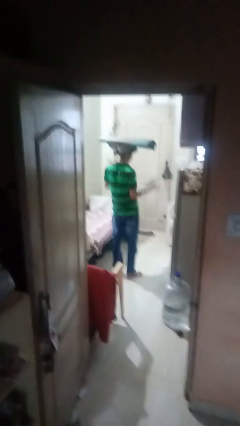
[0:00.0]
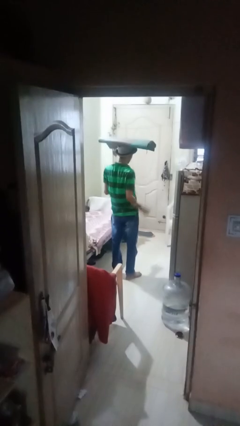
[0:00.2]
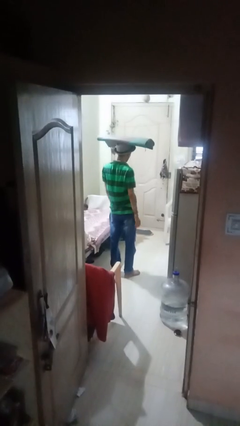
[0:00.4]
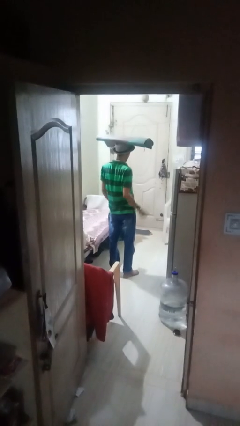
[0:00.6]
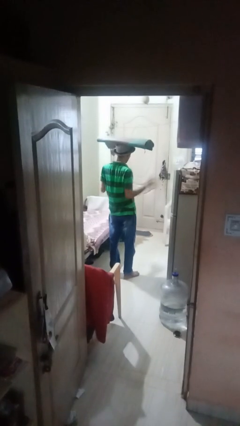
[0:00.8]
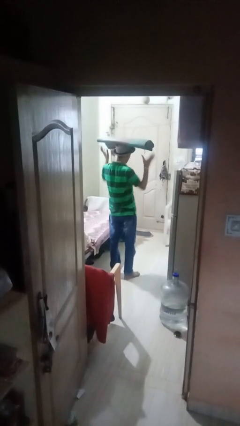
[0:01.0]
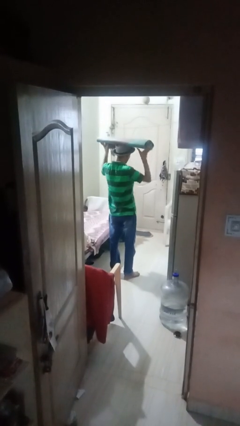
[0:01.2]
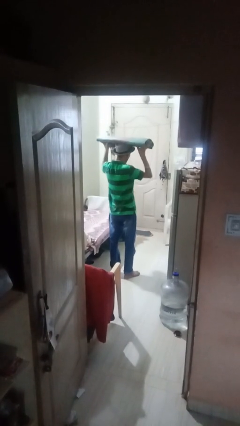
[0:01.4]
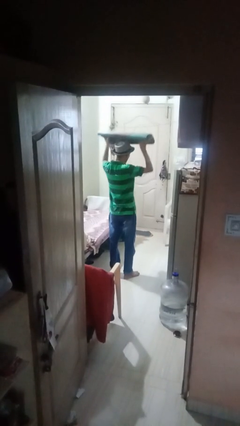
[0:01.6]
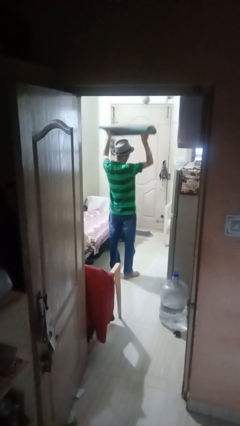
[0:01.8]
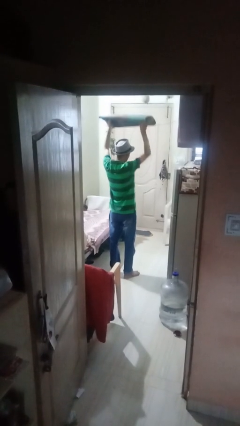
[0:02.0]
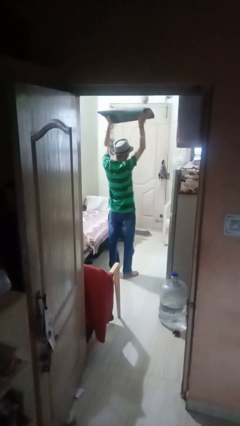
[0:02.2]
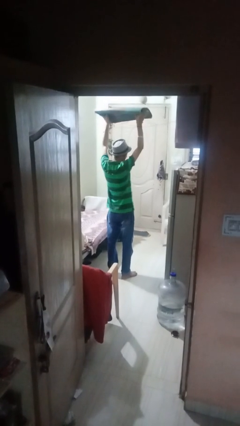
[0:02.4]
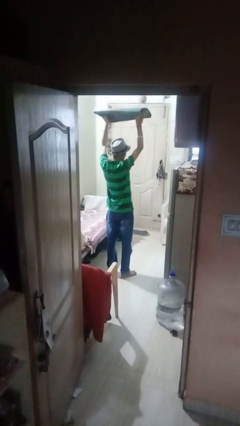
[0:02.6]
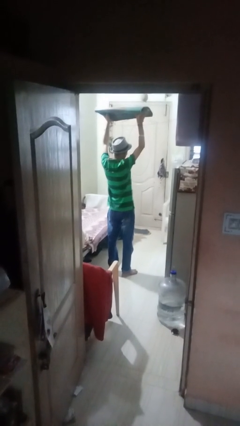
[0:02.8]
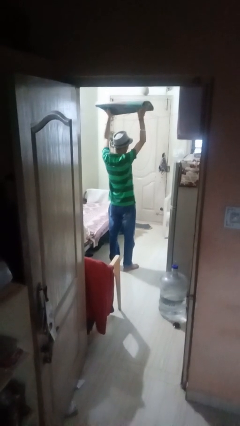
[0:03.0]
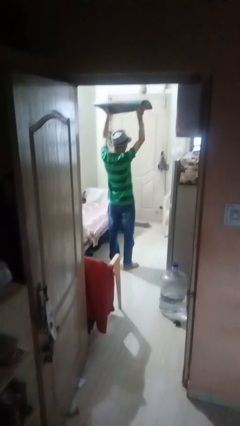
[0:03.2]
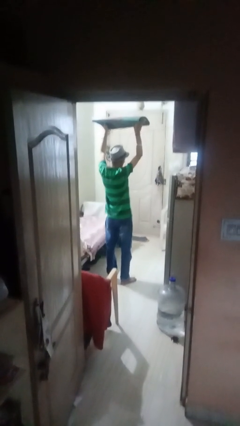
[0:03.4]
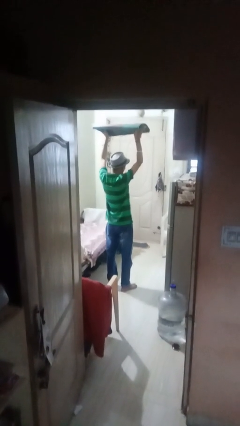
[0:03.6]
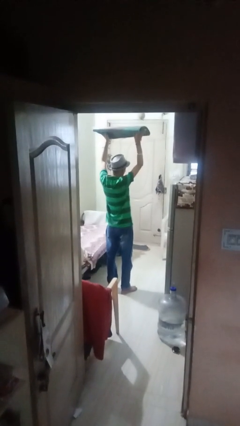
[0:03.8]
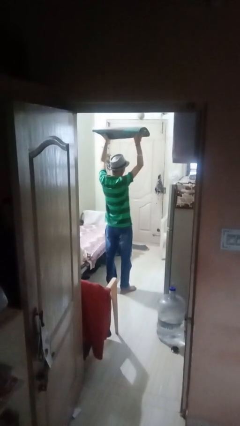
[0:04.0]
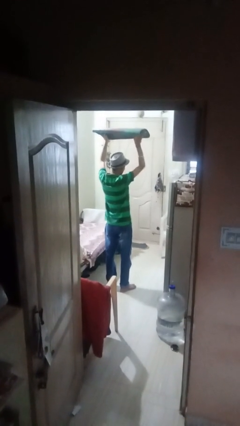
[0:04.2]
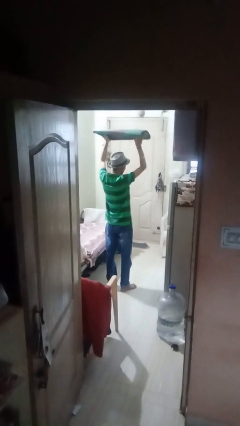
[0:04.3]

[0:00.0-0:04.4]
person holds object above head

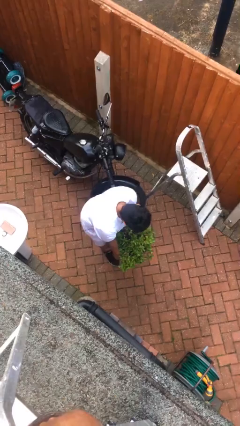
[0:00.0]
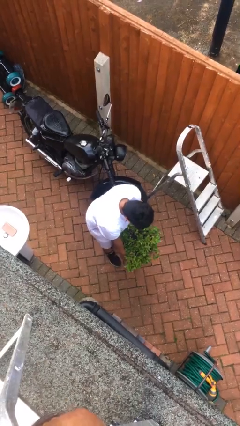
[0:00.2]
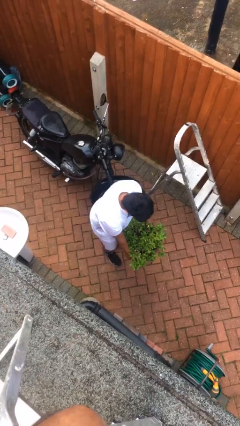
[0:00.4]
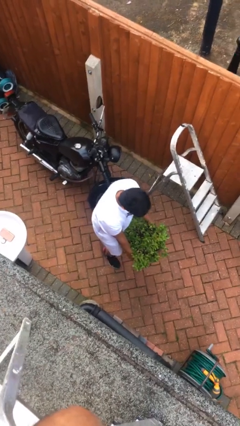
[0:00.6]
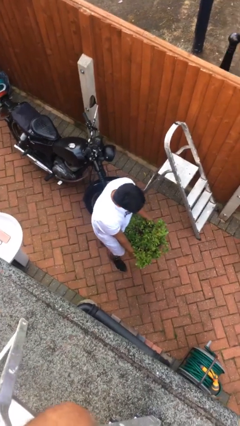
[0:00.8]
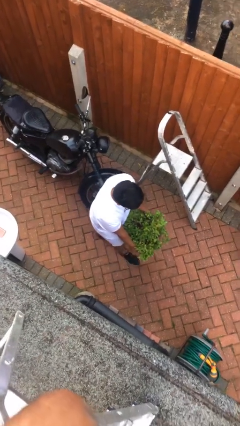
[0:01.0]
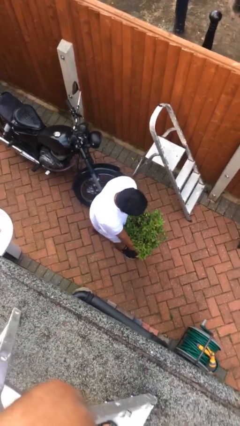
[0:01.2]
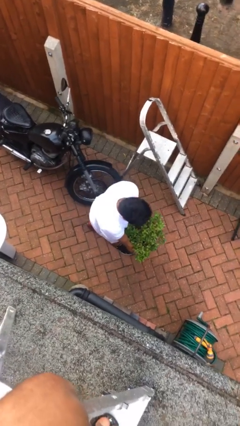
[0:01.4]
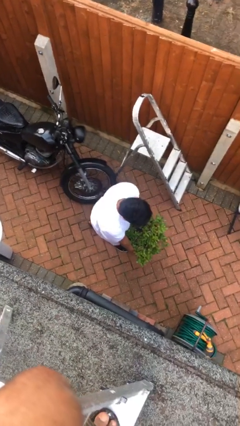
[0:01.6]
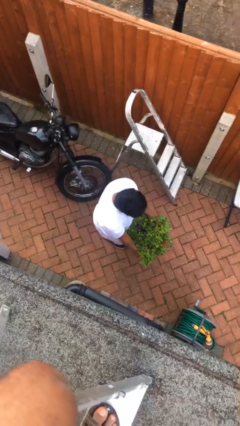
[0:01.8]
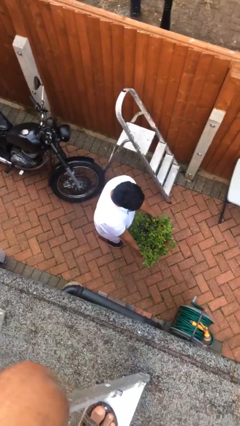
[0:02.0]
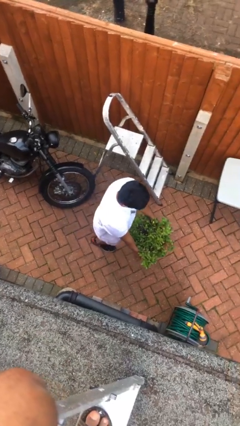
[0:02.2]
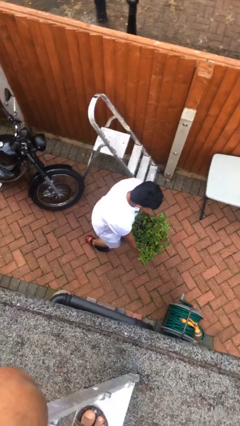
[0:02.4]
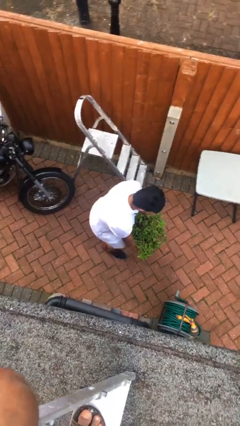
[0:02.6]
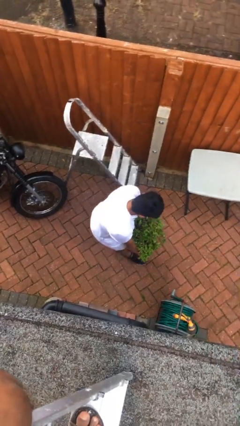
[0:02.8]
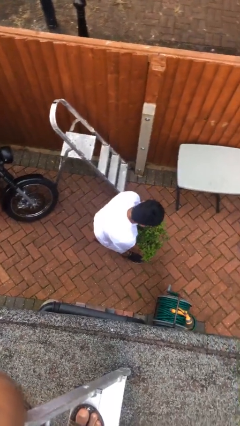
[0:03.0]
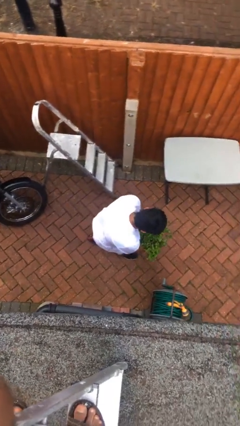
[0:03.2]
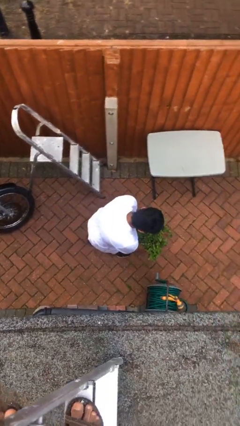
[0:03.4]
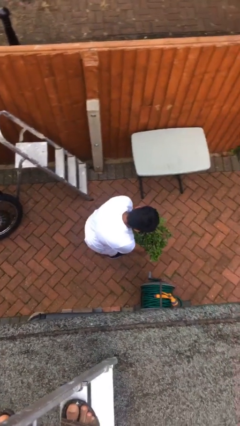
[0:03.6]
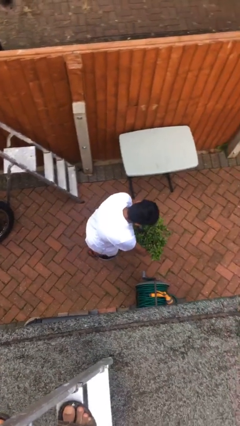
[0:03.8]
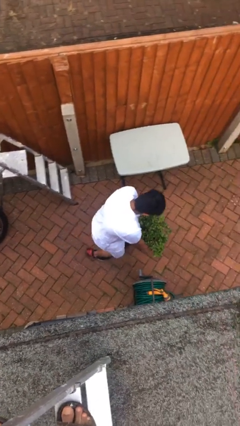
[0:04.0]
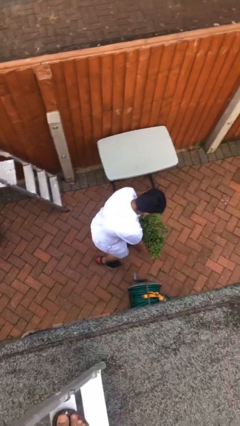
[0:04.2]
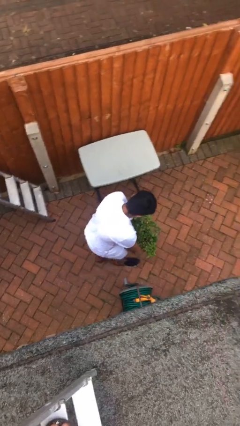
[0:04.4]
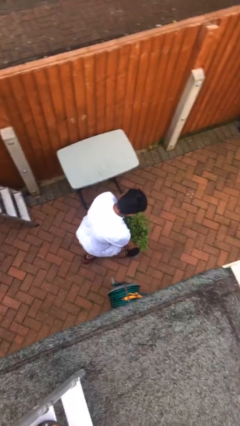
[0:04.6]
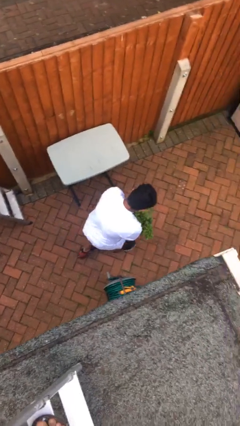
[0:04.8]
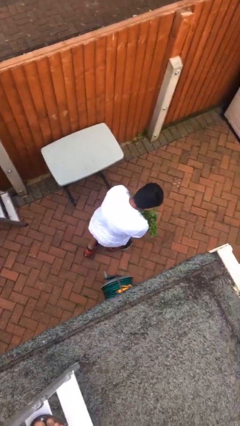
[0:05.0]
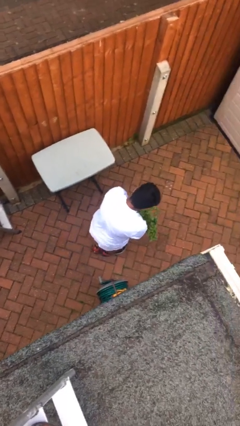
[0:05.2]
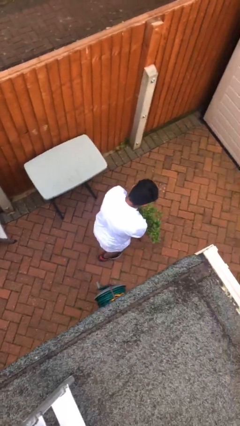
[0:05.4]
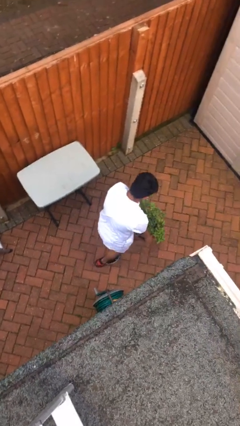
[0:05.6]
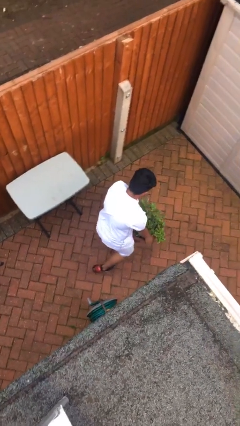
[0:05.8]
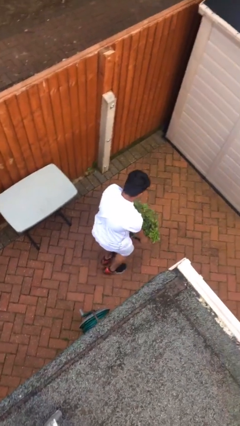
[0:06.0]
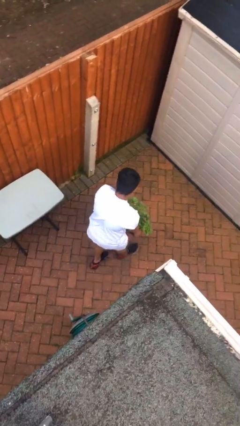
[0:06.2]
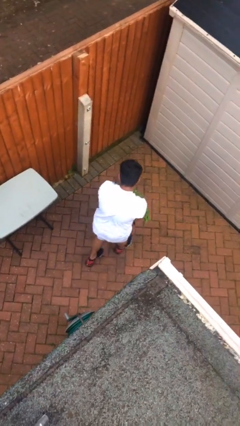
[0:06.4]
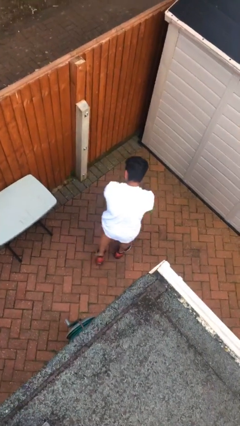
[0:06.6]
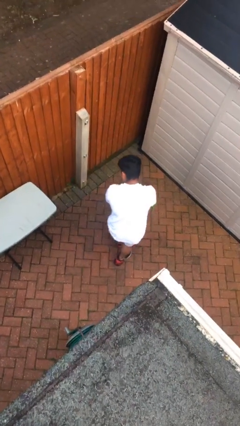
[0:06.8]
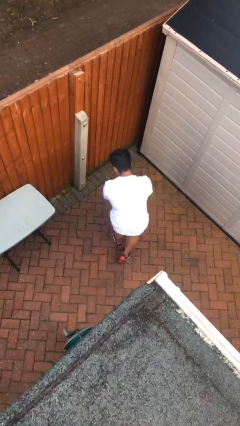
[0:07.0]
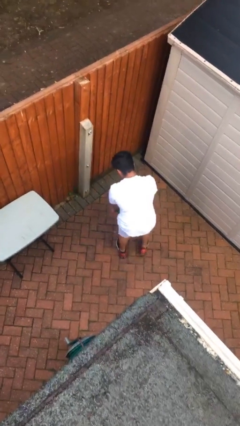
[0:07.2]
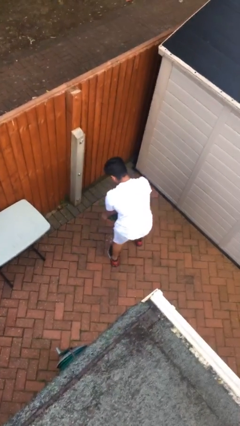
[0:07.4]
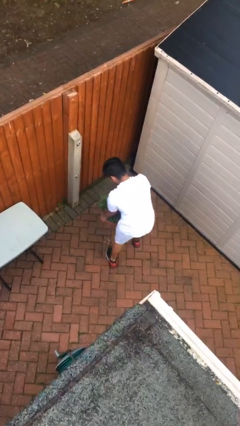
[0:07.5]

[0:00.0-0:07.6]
person carries heavy object

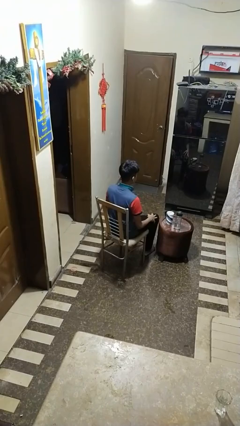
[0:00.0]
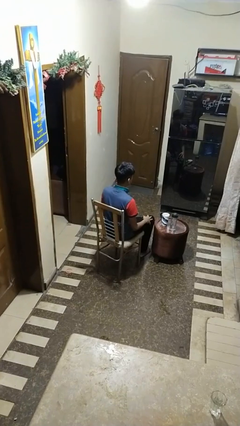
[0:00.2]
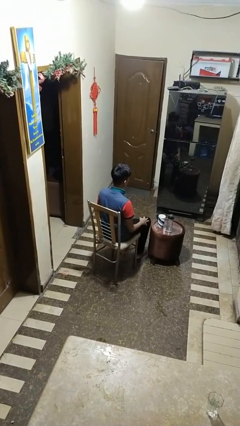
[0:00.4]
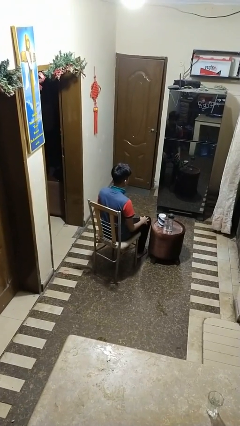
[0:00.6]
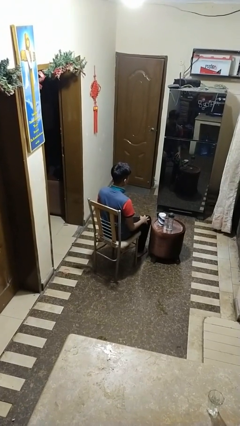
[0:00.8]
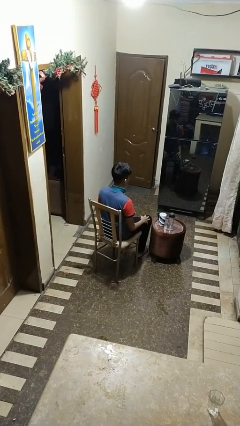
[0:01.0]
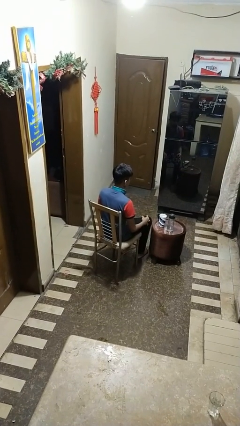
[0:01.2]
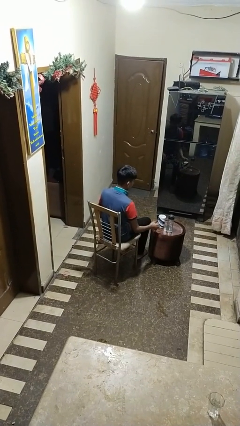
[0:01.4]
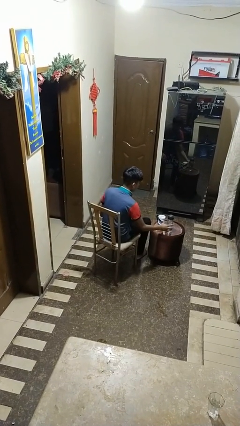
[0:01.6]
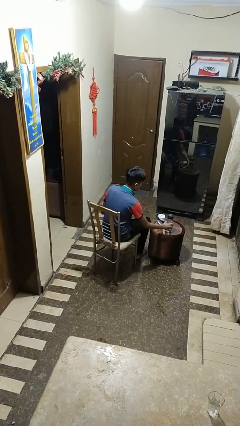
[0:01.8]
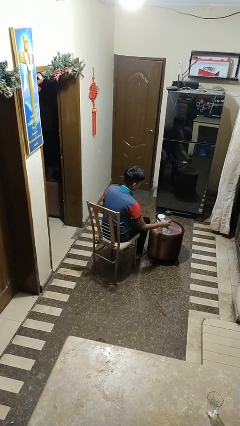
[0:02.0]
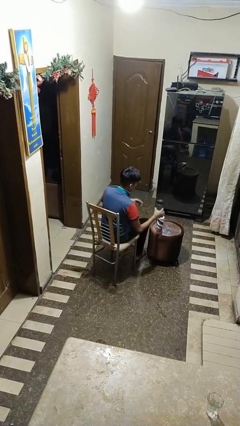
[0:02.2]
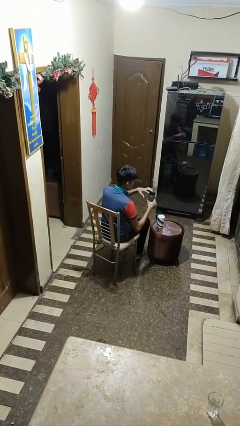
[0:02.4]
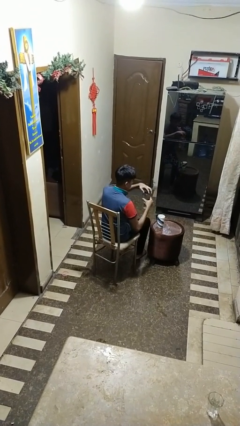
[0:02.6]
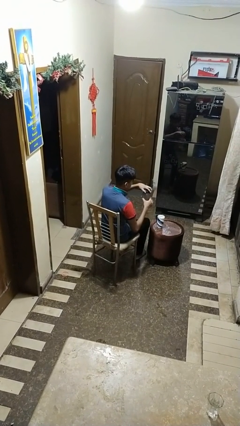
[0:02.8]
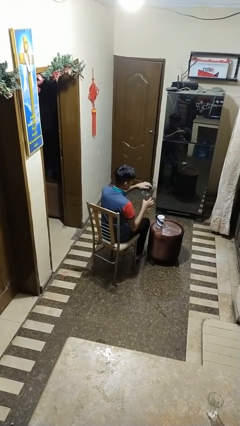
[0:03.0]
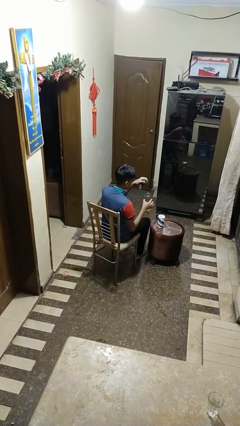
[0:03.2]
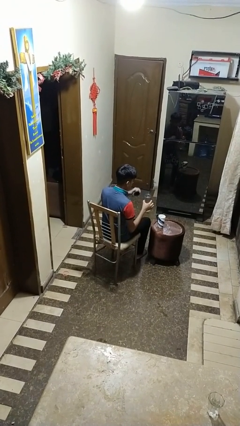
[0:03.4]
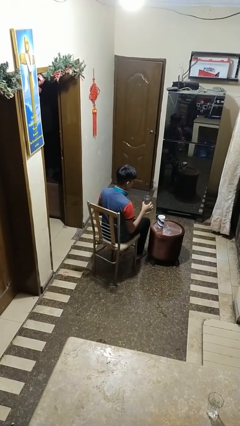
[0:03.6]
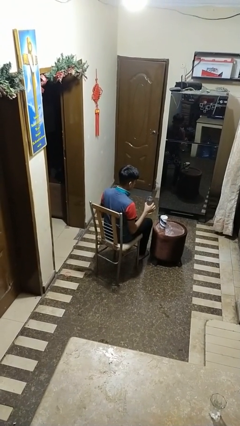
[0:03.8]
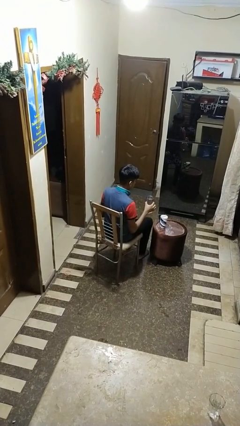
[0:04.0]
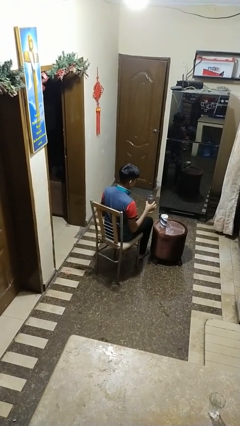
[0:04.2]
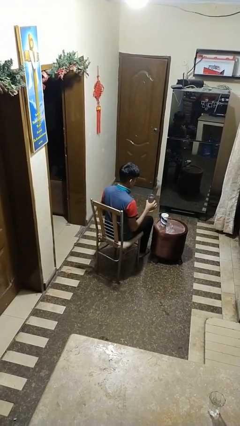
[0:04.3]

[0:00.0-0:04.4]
person unscrews lid from bottle

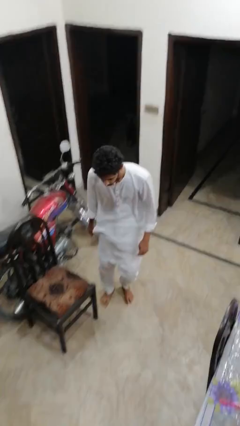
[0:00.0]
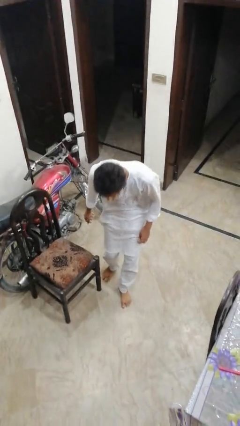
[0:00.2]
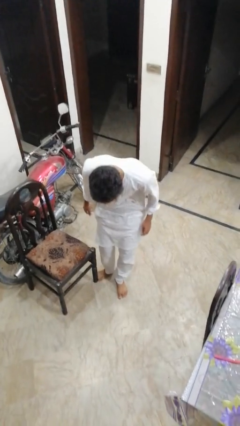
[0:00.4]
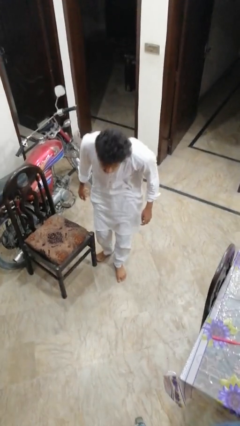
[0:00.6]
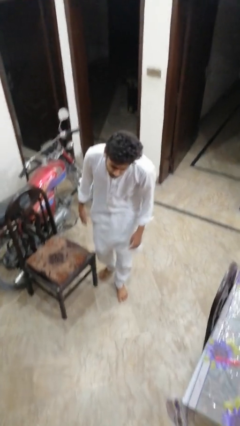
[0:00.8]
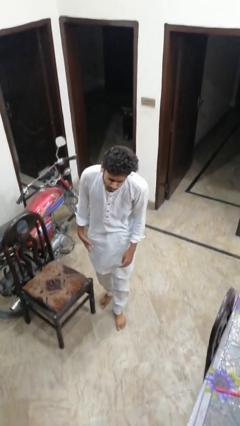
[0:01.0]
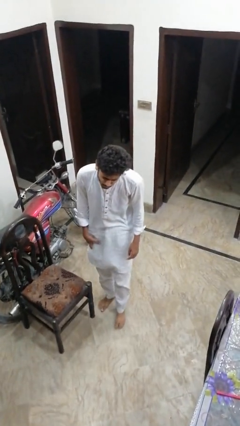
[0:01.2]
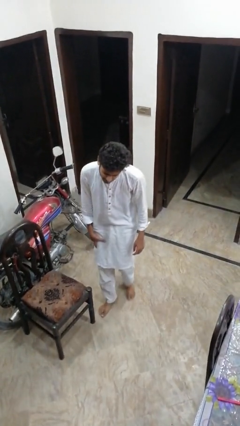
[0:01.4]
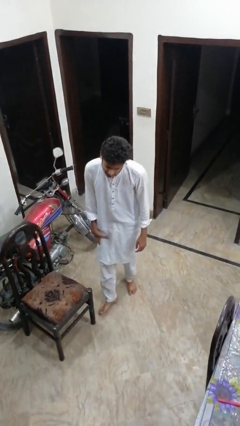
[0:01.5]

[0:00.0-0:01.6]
person stubs toe

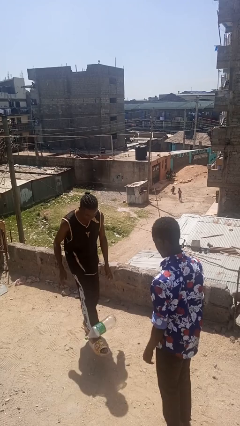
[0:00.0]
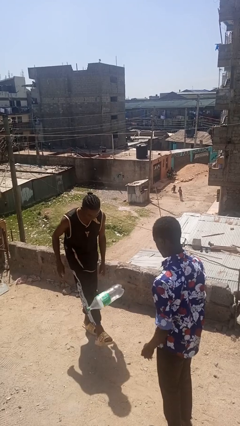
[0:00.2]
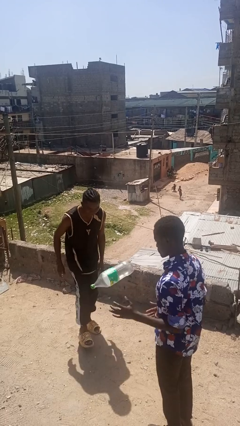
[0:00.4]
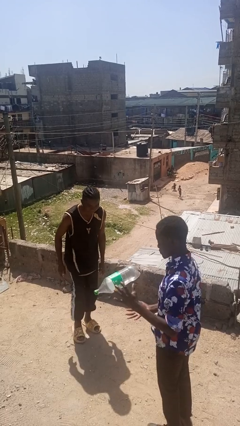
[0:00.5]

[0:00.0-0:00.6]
person kicks object to person
